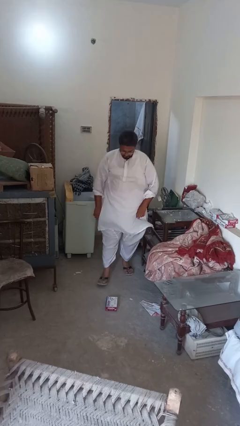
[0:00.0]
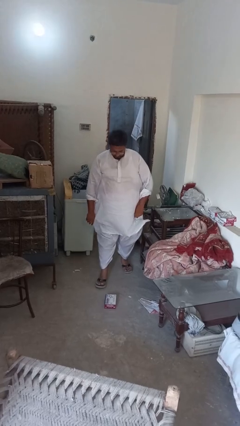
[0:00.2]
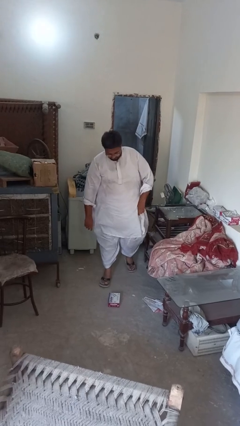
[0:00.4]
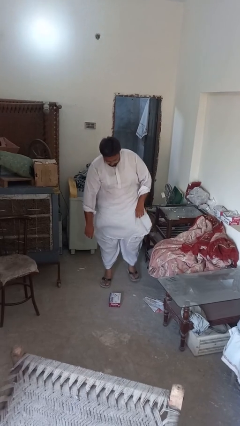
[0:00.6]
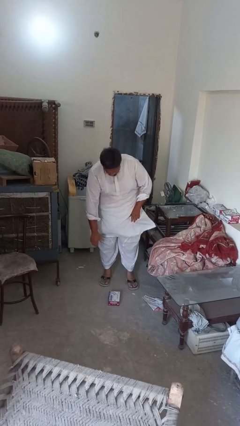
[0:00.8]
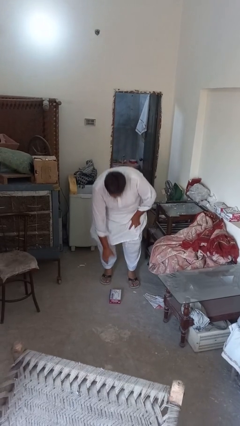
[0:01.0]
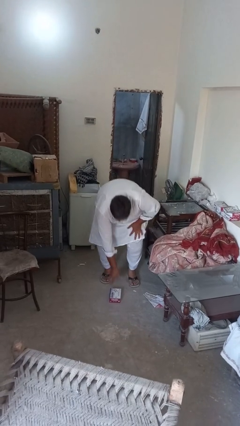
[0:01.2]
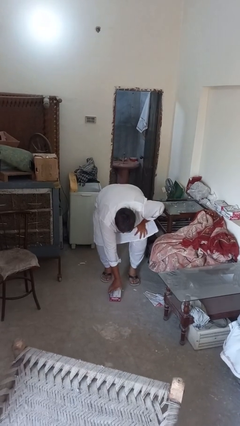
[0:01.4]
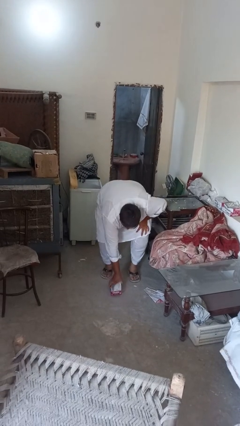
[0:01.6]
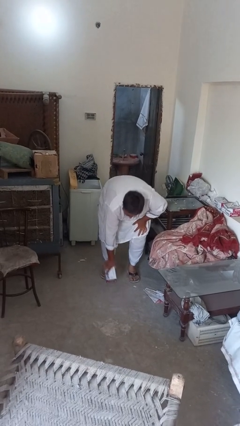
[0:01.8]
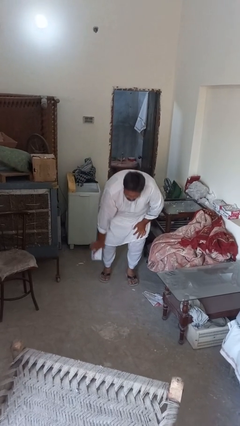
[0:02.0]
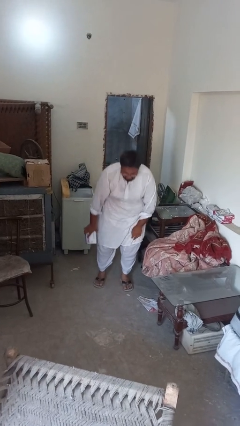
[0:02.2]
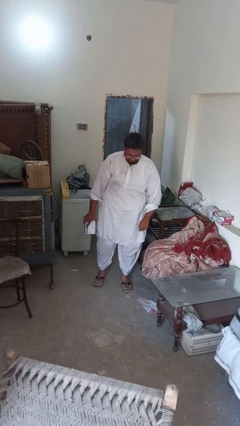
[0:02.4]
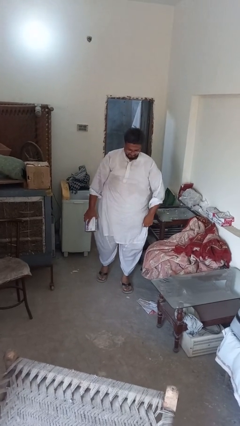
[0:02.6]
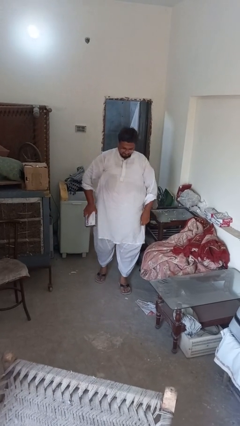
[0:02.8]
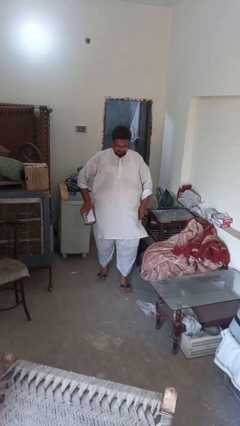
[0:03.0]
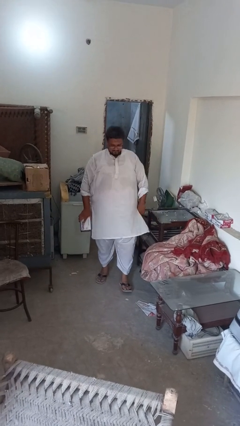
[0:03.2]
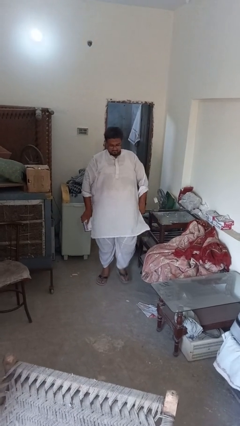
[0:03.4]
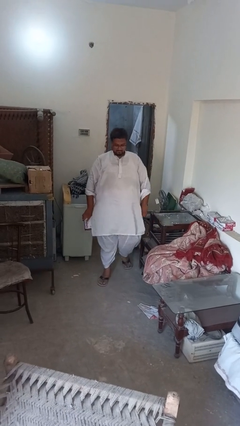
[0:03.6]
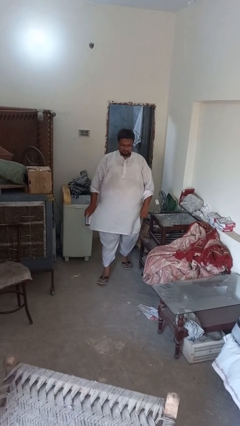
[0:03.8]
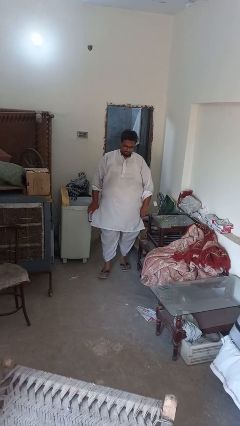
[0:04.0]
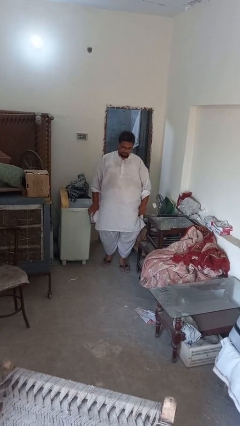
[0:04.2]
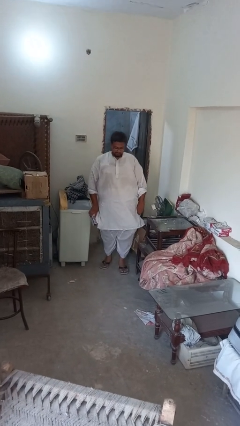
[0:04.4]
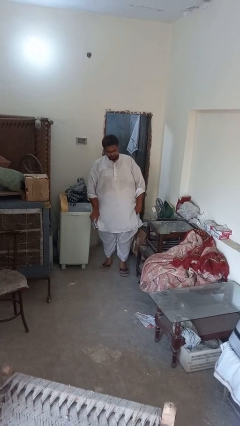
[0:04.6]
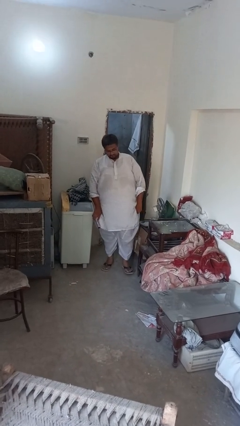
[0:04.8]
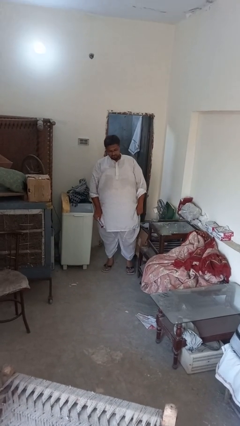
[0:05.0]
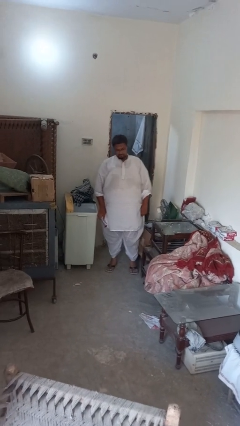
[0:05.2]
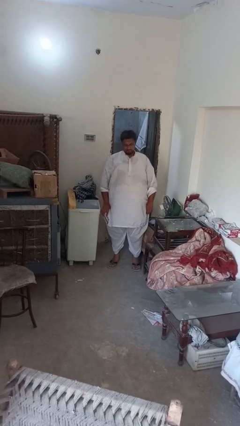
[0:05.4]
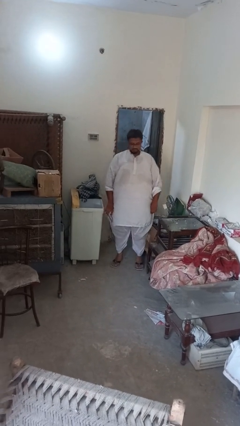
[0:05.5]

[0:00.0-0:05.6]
person picks up object from floor

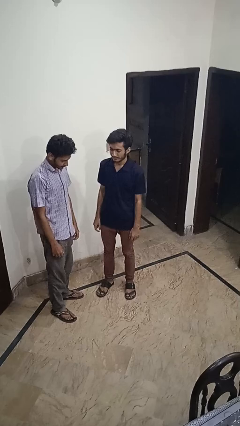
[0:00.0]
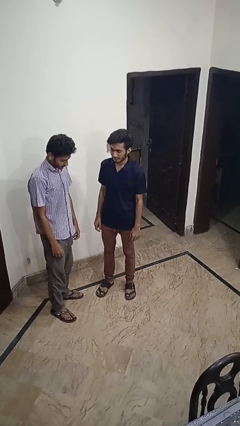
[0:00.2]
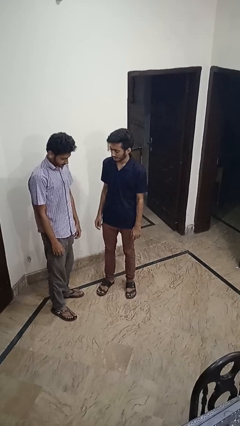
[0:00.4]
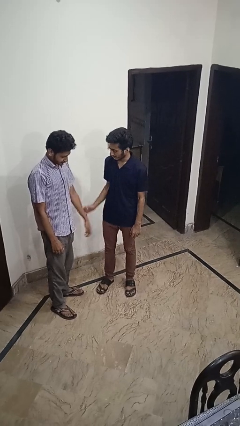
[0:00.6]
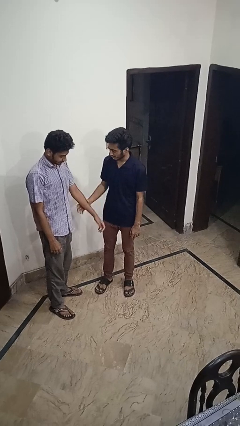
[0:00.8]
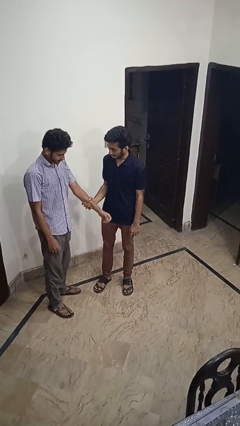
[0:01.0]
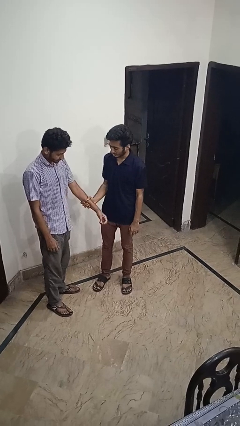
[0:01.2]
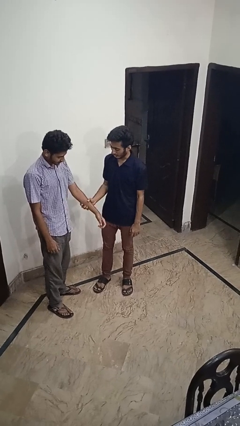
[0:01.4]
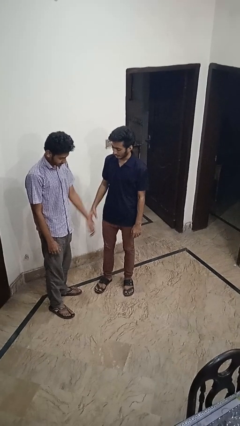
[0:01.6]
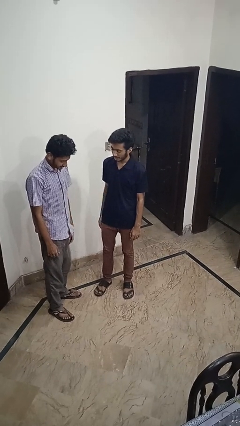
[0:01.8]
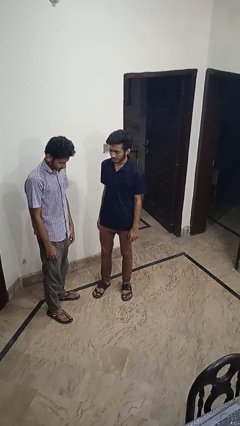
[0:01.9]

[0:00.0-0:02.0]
person grabs person by forearm

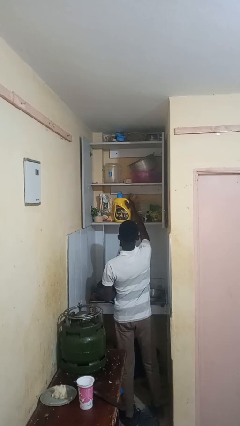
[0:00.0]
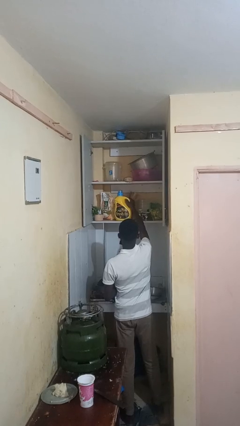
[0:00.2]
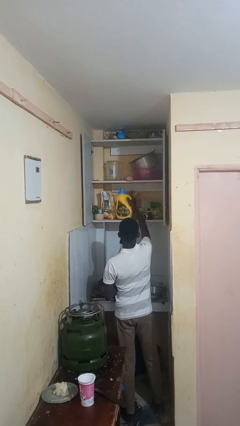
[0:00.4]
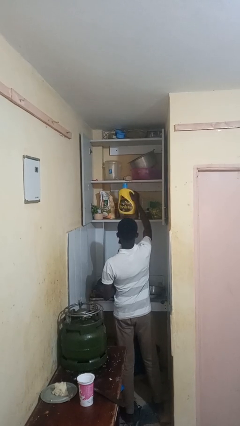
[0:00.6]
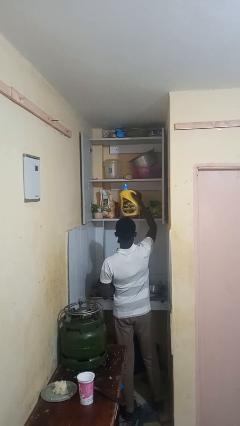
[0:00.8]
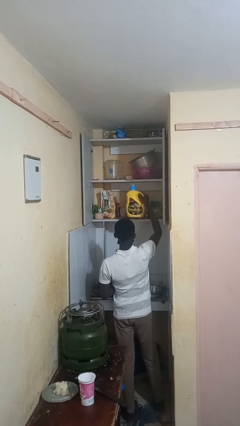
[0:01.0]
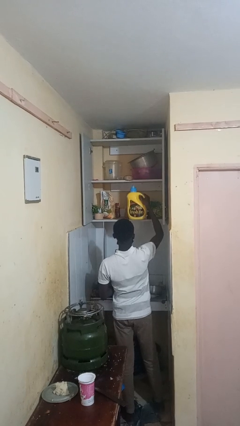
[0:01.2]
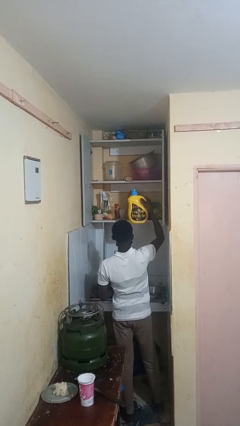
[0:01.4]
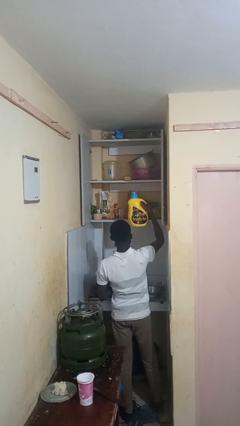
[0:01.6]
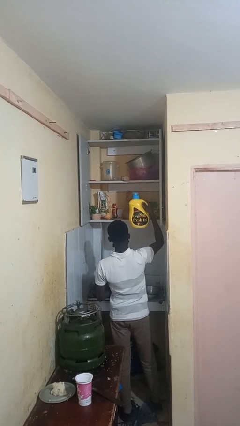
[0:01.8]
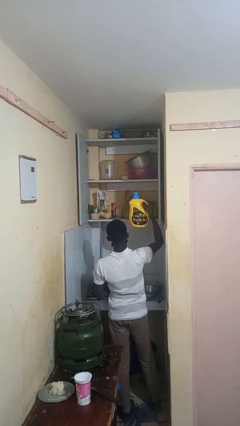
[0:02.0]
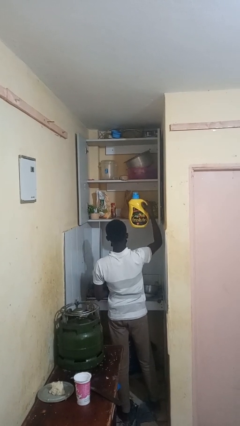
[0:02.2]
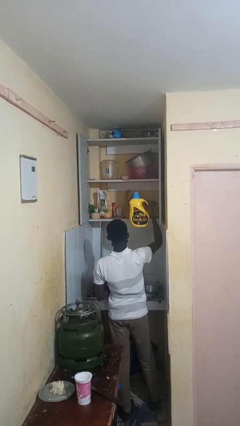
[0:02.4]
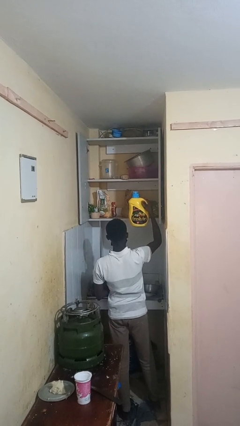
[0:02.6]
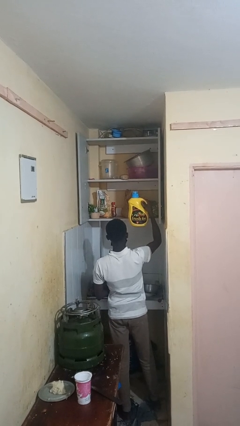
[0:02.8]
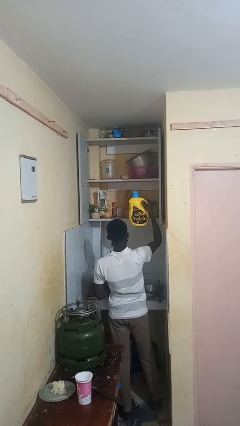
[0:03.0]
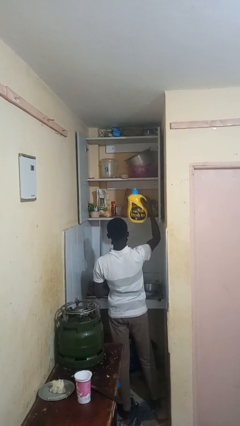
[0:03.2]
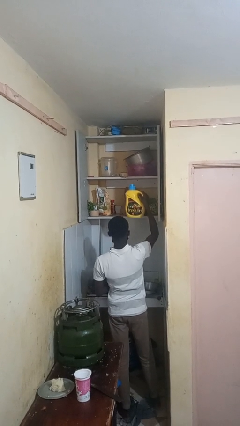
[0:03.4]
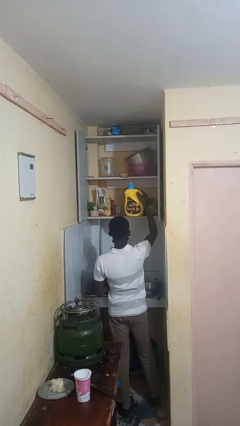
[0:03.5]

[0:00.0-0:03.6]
person picks up object from countertop

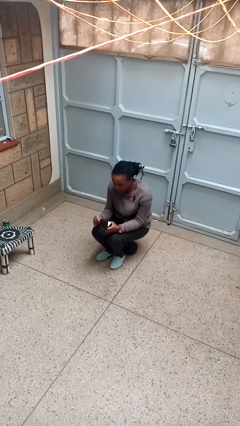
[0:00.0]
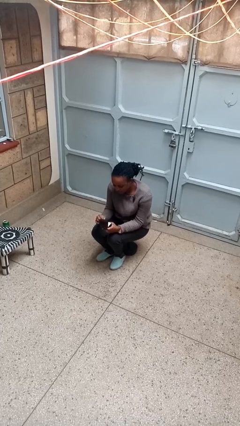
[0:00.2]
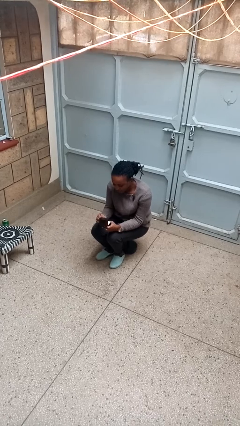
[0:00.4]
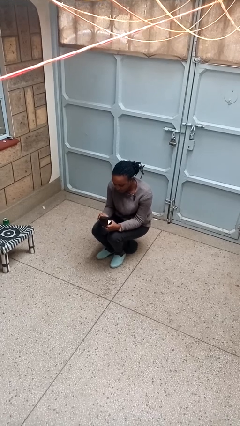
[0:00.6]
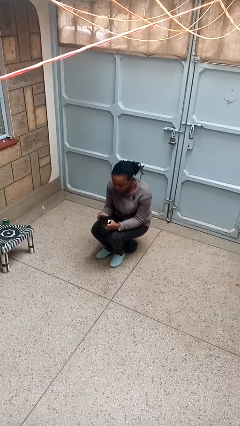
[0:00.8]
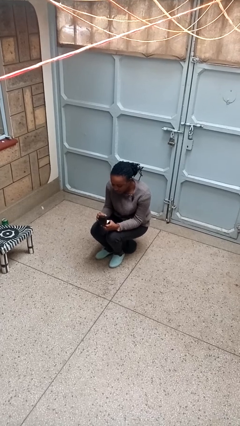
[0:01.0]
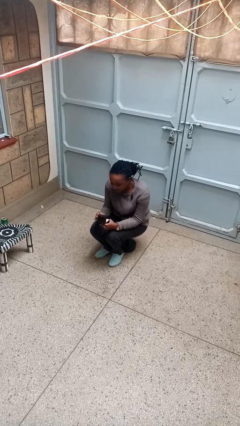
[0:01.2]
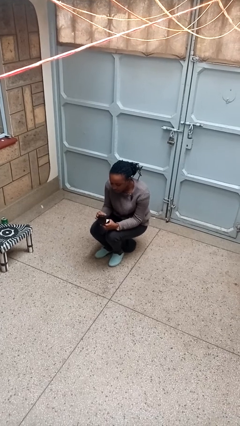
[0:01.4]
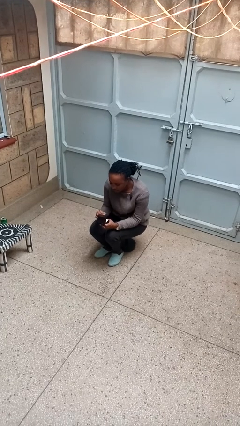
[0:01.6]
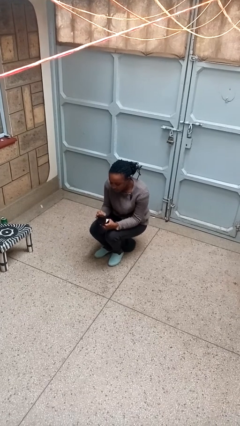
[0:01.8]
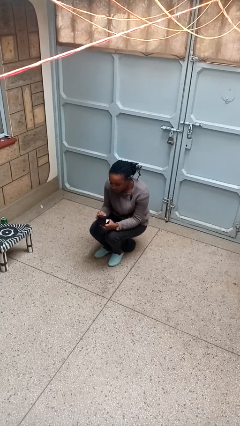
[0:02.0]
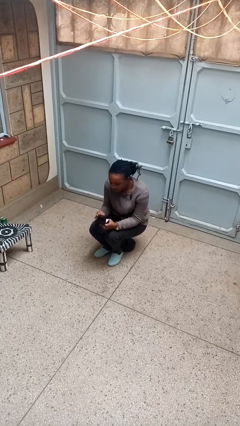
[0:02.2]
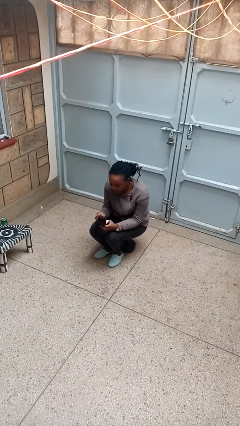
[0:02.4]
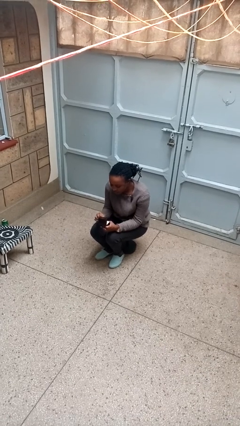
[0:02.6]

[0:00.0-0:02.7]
person searches jewelry box

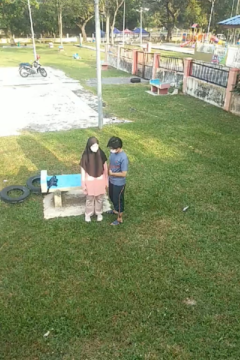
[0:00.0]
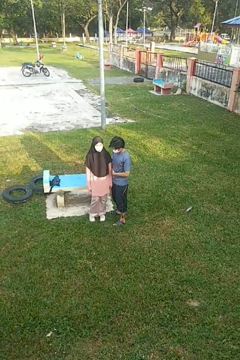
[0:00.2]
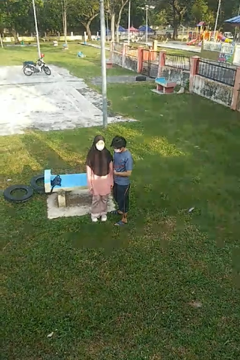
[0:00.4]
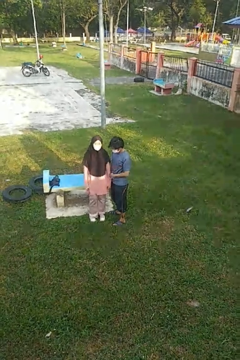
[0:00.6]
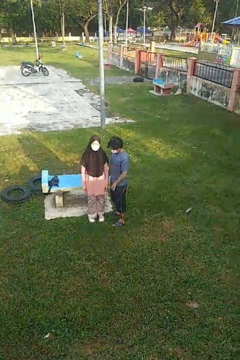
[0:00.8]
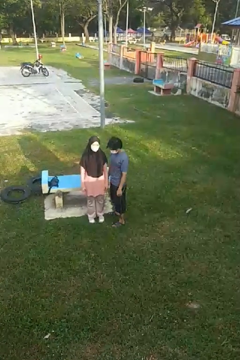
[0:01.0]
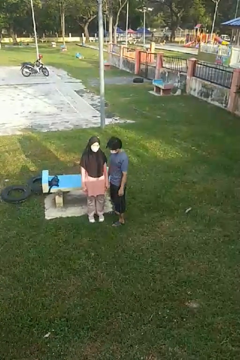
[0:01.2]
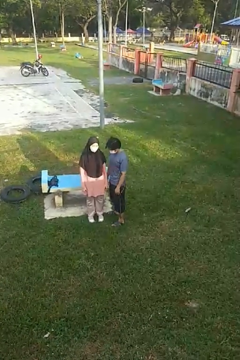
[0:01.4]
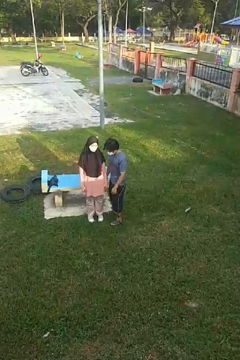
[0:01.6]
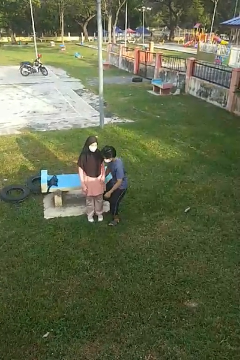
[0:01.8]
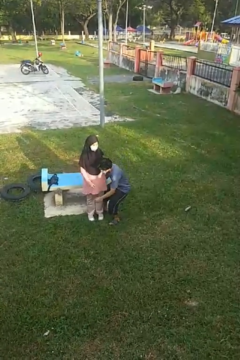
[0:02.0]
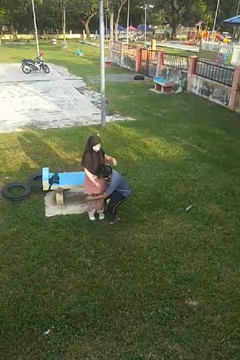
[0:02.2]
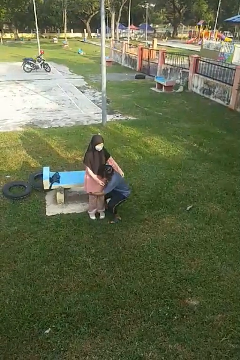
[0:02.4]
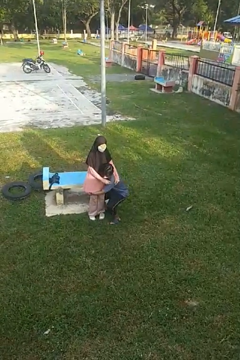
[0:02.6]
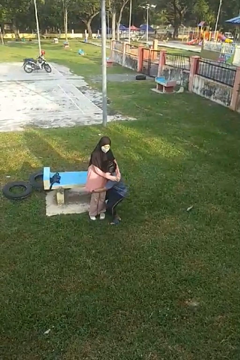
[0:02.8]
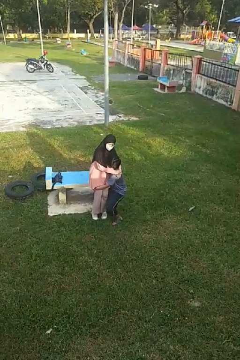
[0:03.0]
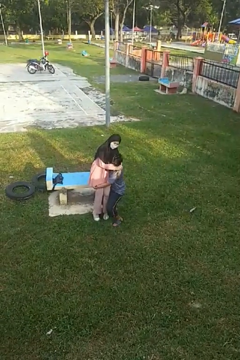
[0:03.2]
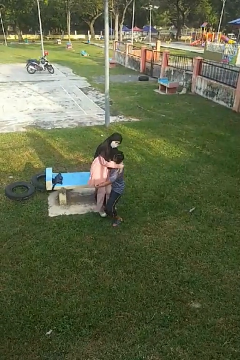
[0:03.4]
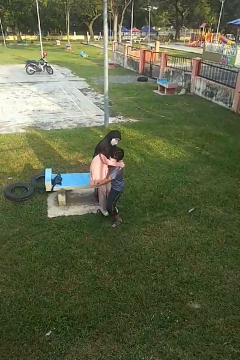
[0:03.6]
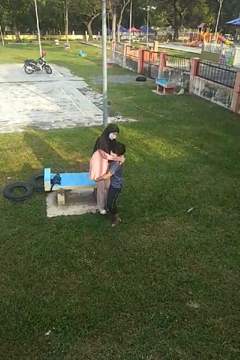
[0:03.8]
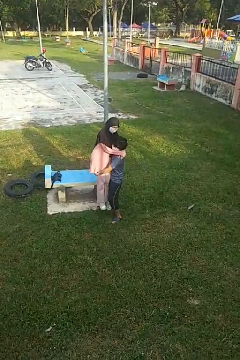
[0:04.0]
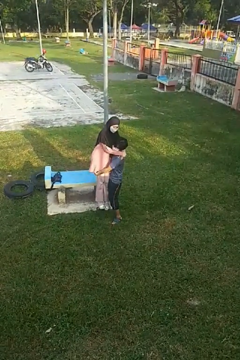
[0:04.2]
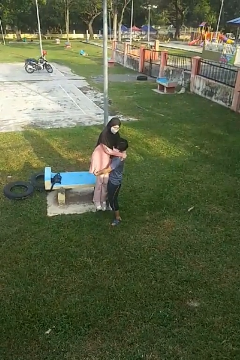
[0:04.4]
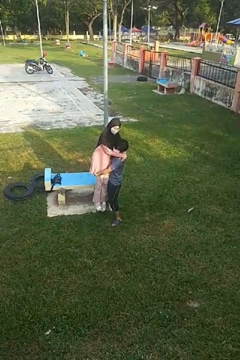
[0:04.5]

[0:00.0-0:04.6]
person picks up person
